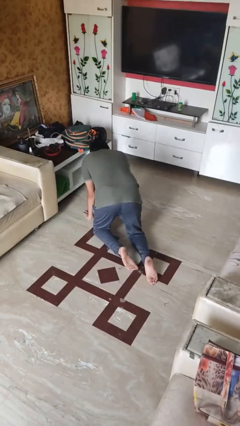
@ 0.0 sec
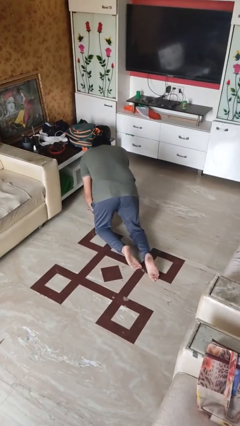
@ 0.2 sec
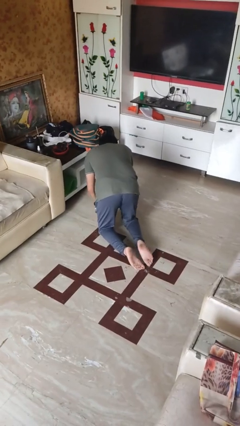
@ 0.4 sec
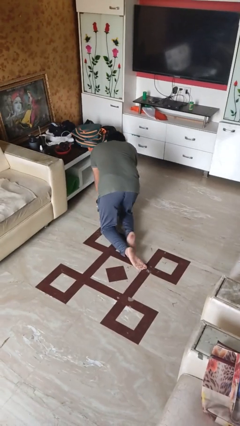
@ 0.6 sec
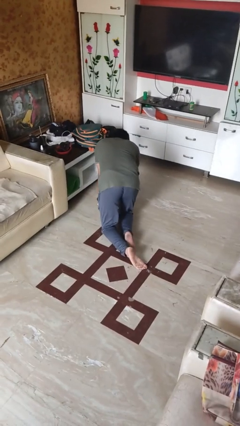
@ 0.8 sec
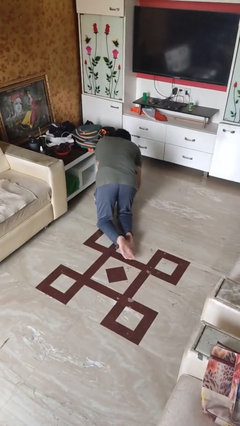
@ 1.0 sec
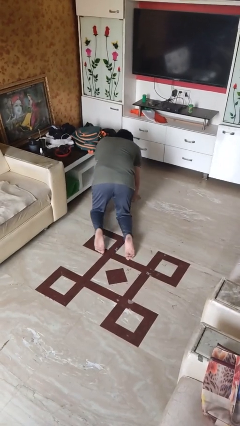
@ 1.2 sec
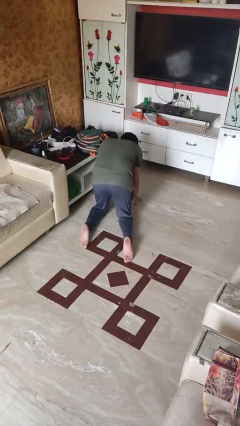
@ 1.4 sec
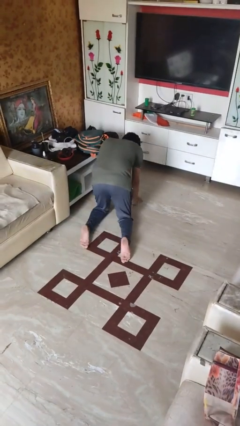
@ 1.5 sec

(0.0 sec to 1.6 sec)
person crawls

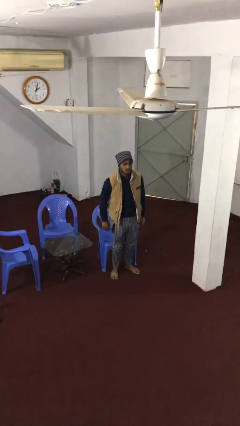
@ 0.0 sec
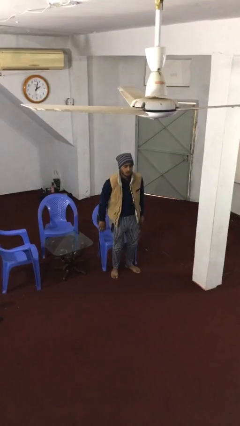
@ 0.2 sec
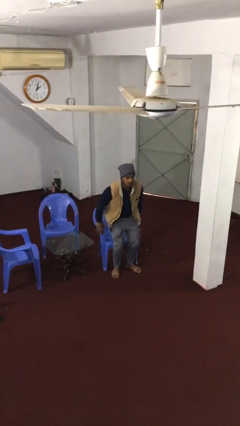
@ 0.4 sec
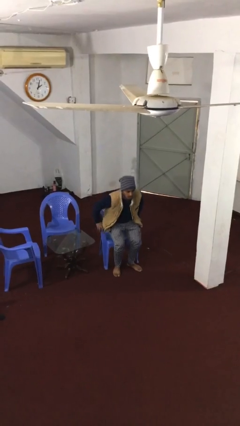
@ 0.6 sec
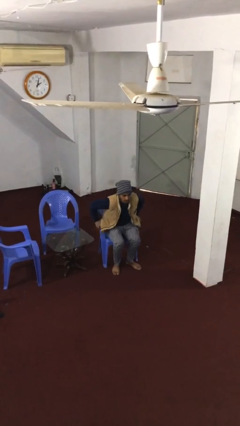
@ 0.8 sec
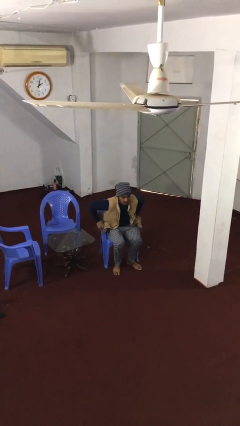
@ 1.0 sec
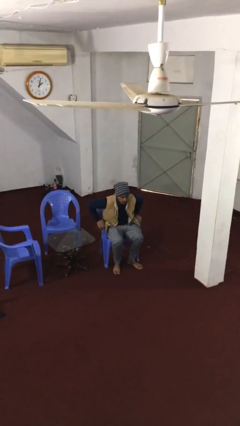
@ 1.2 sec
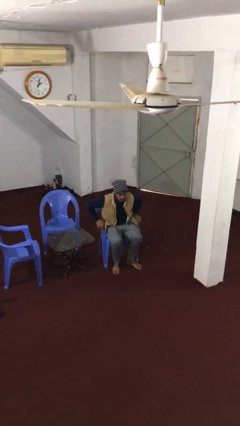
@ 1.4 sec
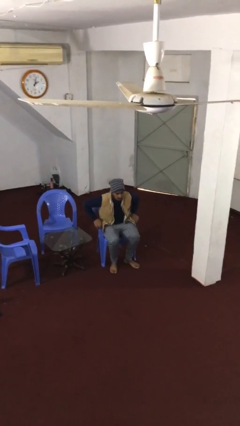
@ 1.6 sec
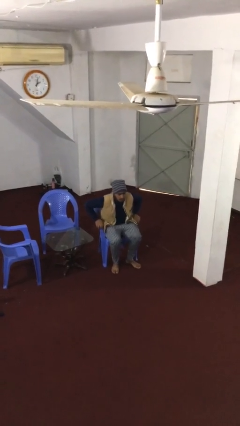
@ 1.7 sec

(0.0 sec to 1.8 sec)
person sits down

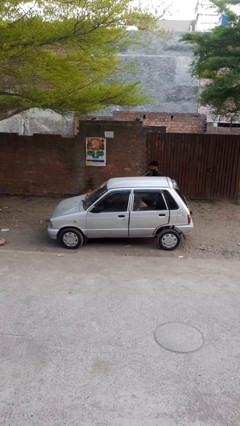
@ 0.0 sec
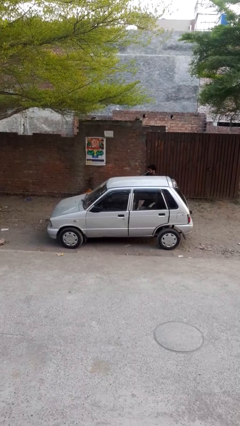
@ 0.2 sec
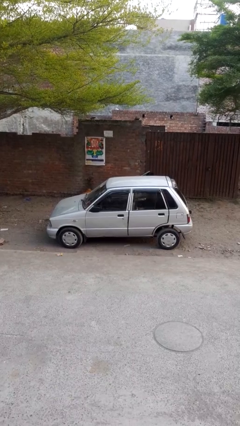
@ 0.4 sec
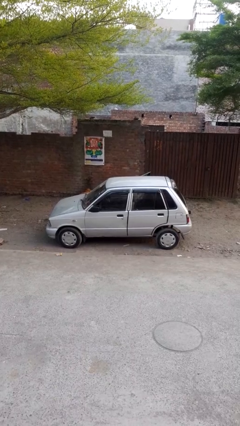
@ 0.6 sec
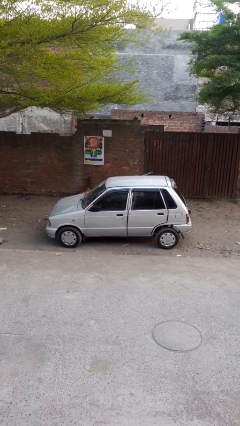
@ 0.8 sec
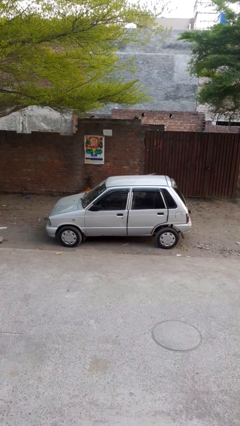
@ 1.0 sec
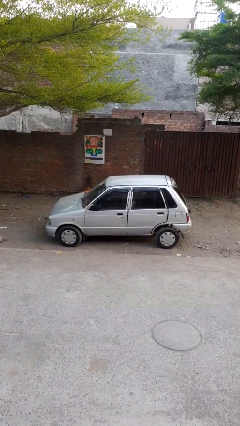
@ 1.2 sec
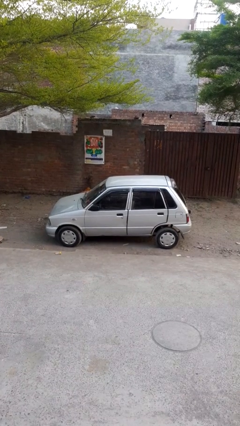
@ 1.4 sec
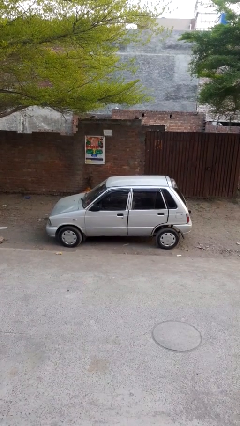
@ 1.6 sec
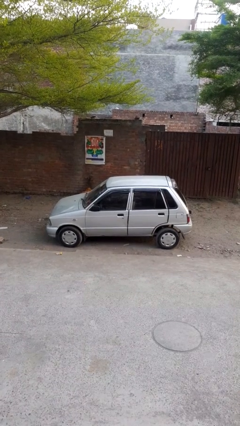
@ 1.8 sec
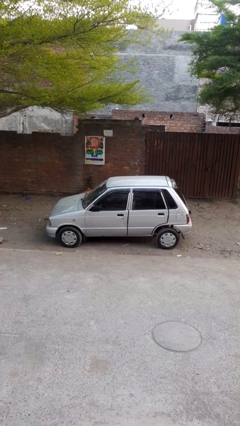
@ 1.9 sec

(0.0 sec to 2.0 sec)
car picks up person

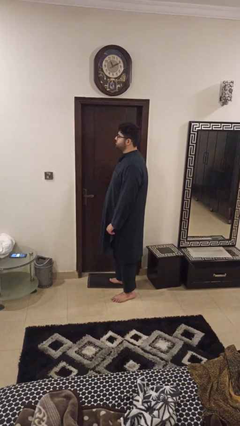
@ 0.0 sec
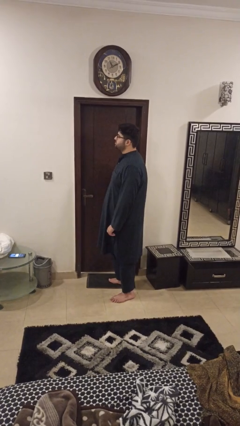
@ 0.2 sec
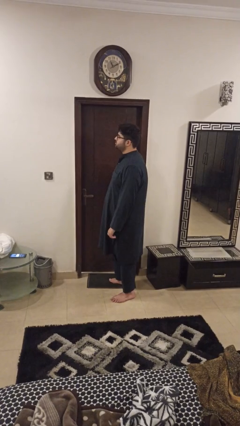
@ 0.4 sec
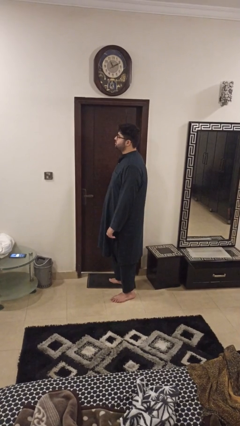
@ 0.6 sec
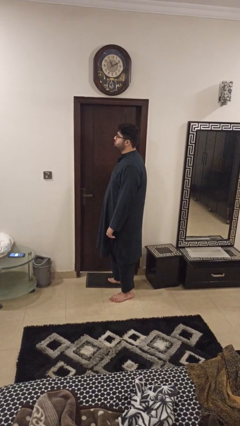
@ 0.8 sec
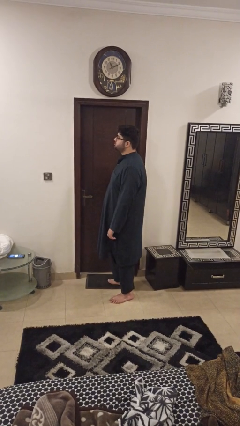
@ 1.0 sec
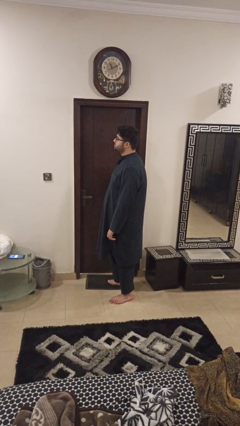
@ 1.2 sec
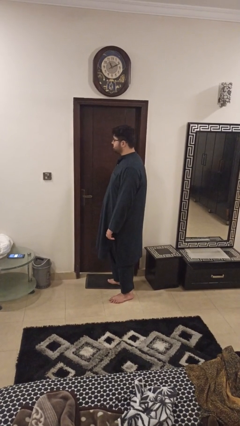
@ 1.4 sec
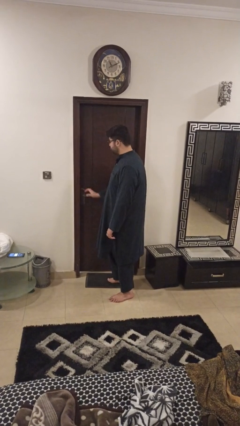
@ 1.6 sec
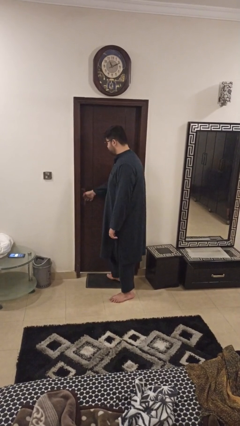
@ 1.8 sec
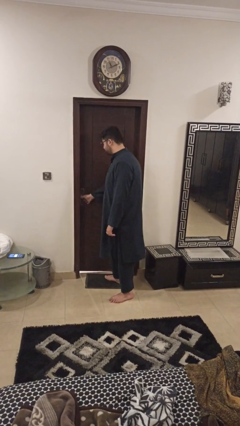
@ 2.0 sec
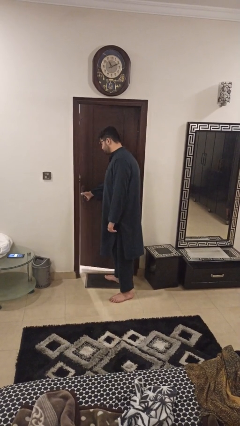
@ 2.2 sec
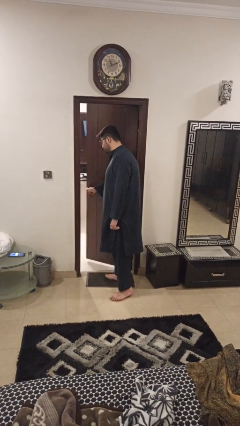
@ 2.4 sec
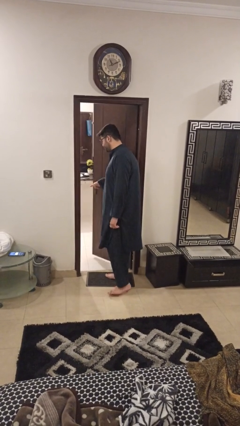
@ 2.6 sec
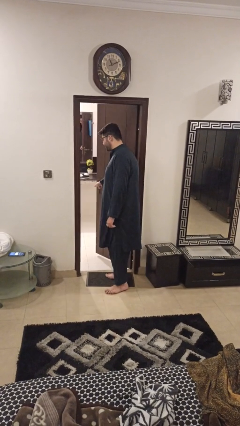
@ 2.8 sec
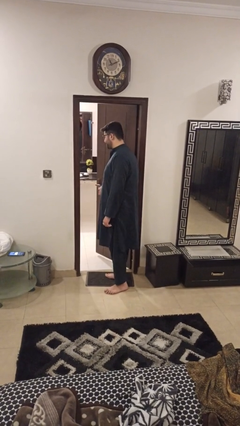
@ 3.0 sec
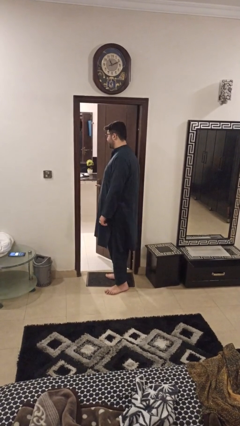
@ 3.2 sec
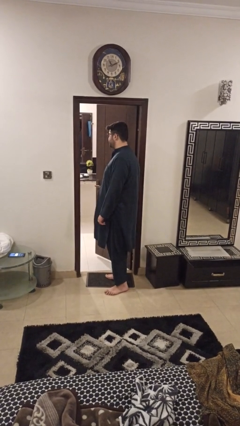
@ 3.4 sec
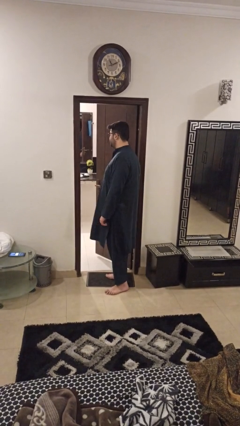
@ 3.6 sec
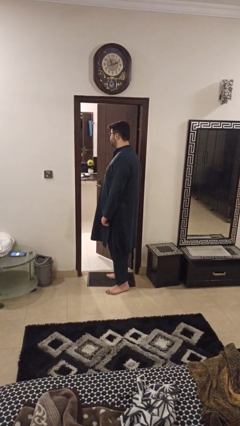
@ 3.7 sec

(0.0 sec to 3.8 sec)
person opens facility door

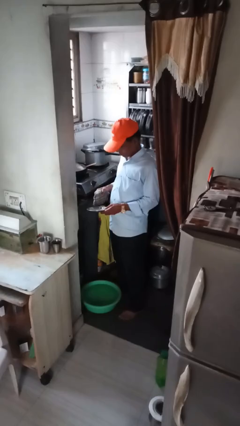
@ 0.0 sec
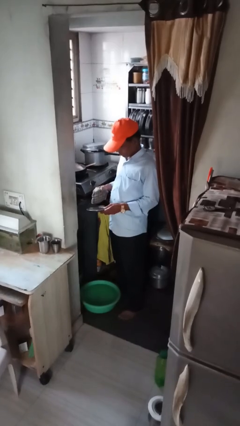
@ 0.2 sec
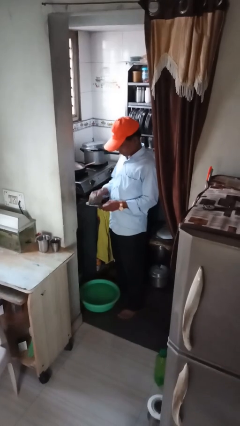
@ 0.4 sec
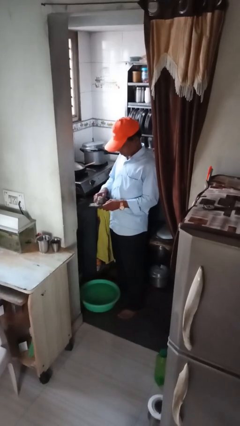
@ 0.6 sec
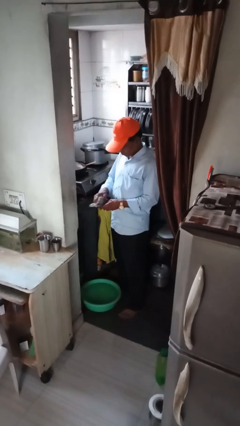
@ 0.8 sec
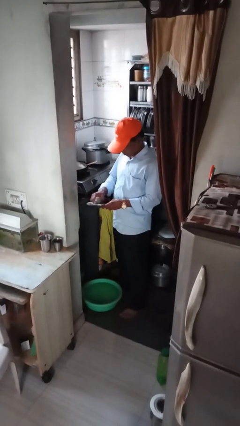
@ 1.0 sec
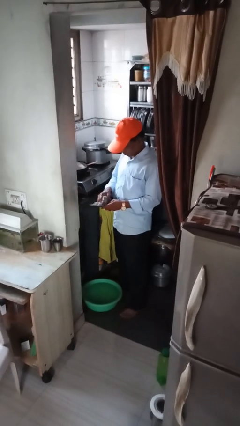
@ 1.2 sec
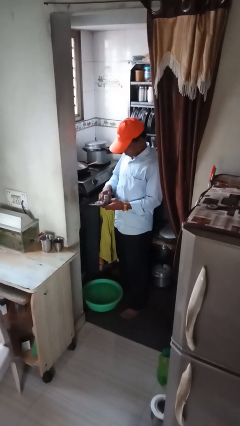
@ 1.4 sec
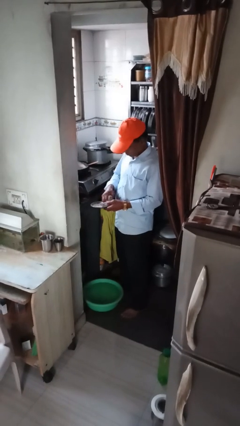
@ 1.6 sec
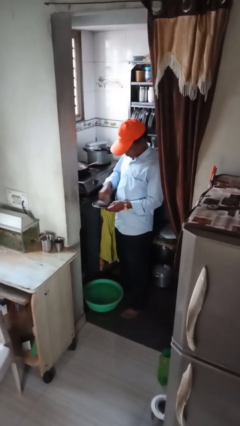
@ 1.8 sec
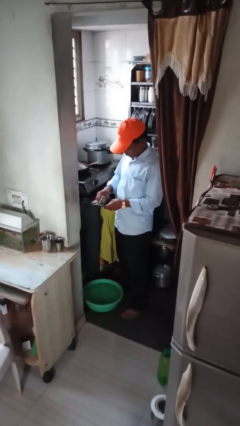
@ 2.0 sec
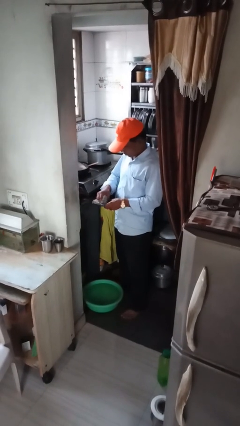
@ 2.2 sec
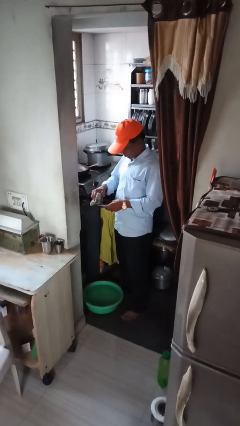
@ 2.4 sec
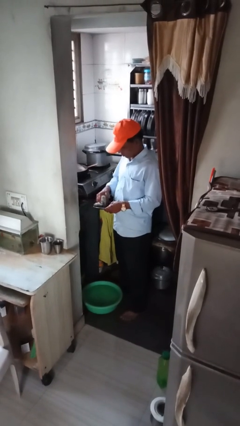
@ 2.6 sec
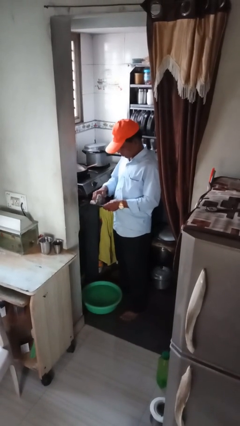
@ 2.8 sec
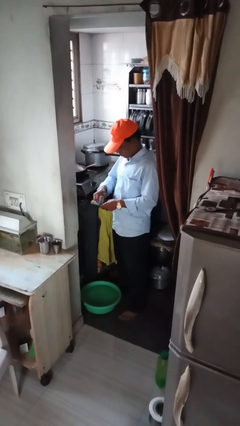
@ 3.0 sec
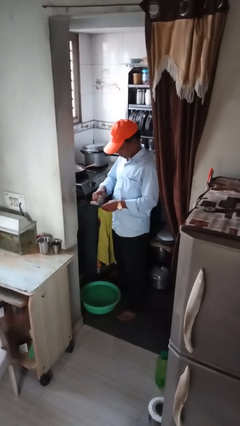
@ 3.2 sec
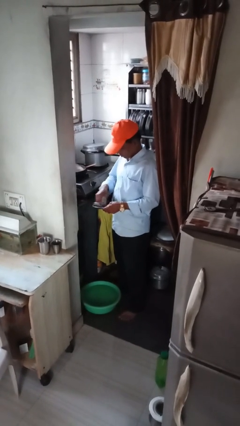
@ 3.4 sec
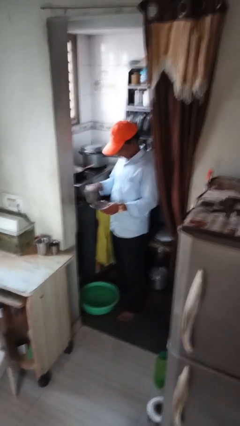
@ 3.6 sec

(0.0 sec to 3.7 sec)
person dries dish

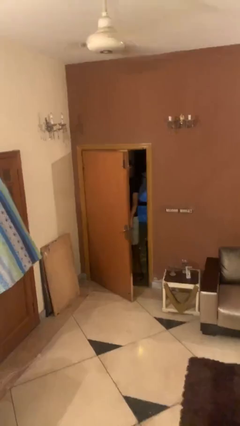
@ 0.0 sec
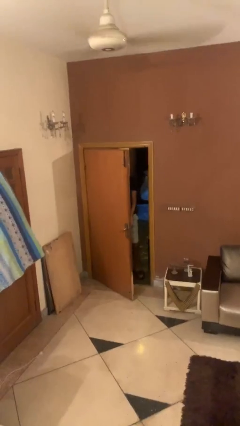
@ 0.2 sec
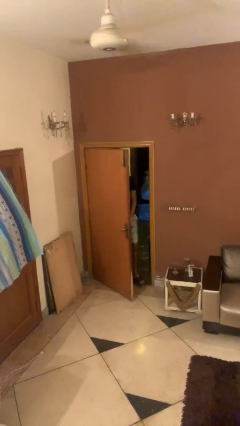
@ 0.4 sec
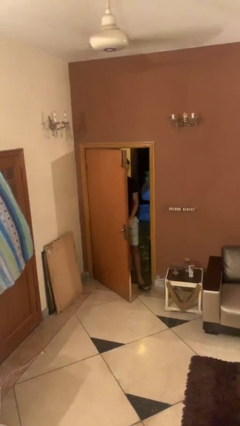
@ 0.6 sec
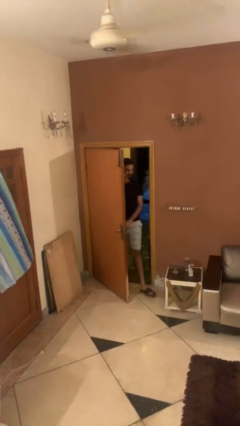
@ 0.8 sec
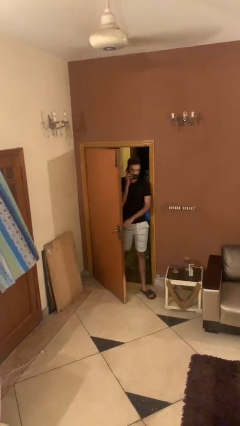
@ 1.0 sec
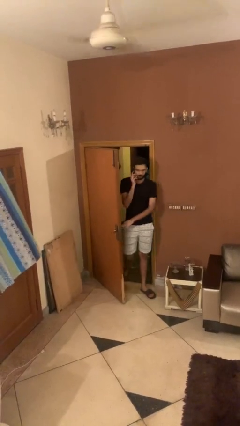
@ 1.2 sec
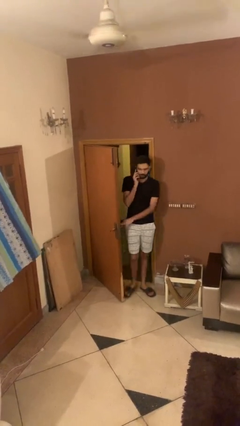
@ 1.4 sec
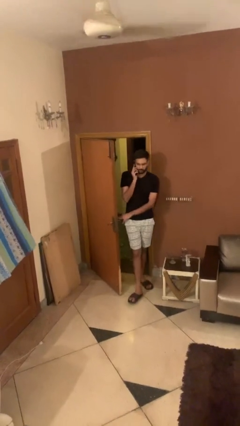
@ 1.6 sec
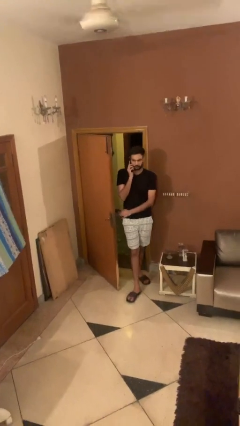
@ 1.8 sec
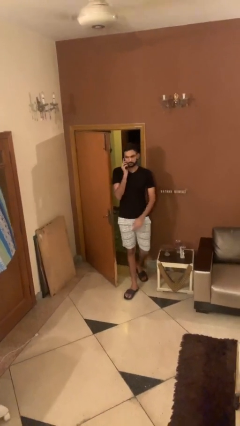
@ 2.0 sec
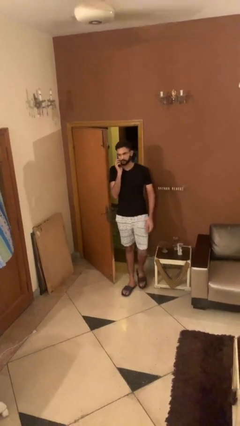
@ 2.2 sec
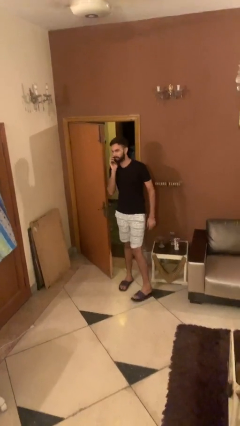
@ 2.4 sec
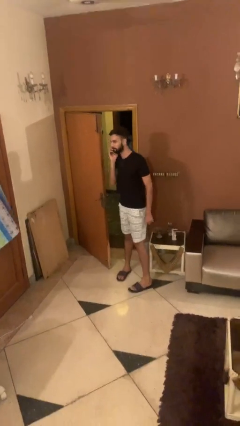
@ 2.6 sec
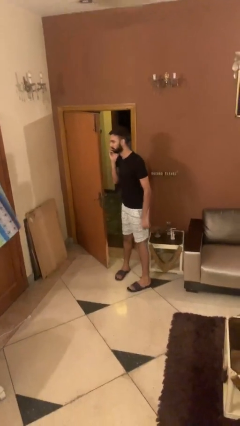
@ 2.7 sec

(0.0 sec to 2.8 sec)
person enters scene through structure

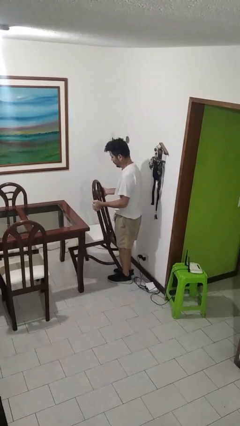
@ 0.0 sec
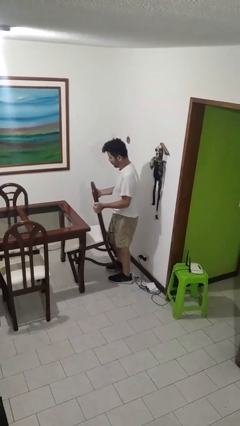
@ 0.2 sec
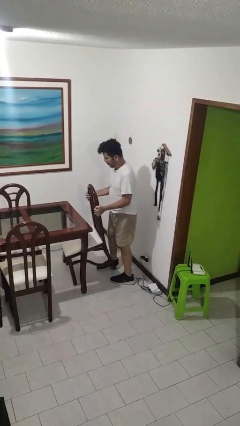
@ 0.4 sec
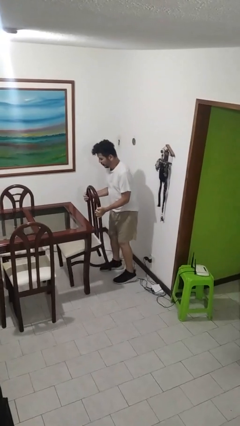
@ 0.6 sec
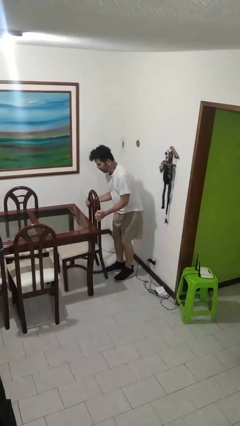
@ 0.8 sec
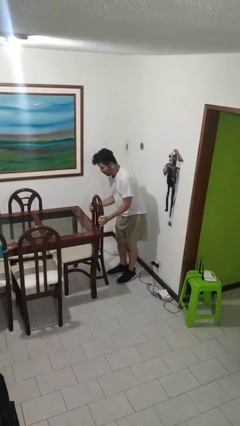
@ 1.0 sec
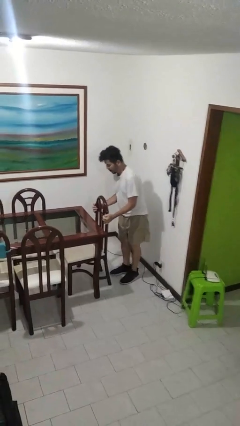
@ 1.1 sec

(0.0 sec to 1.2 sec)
person pushes in chair
